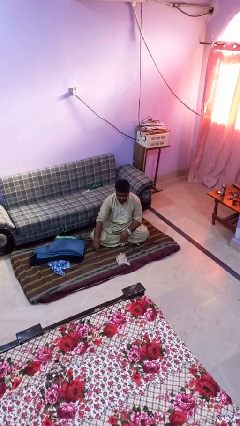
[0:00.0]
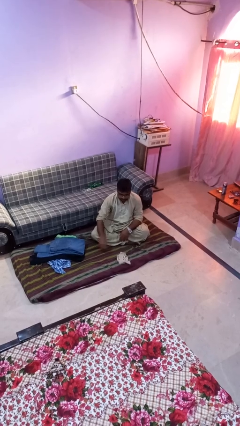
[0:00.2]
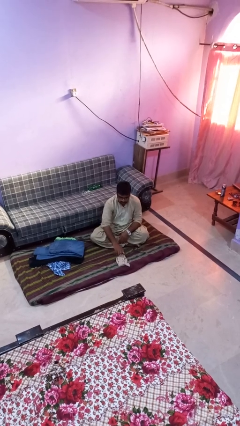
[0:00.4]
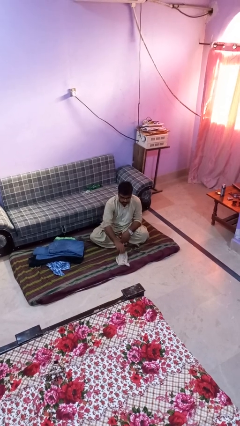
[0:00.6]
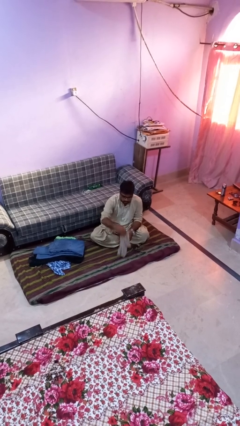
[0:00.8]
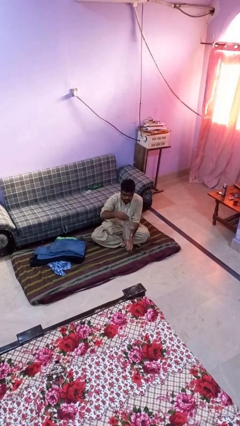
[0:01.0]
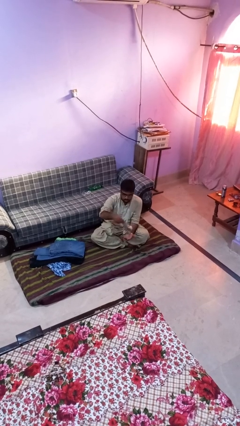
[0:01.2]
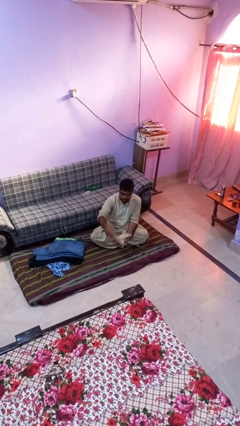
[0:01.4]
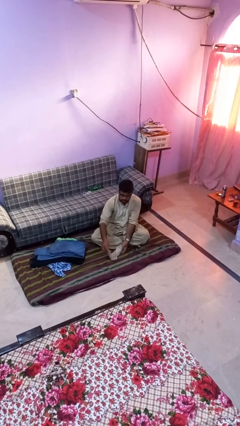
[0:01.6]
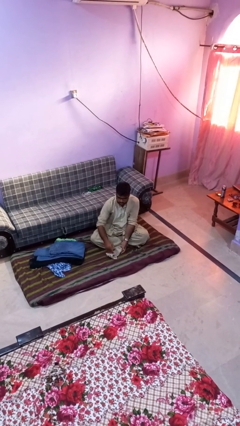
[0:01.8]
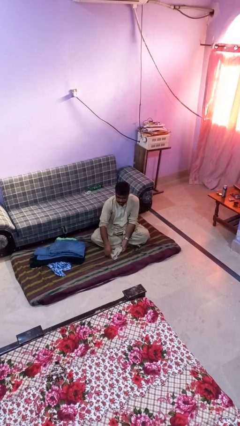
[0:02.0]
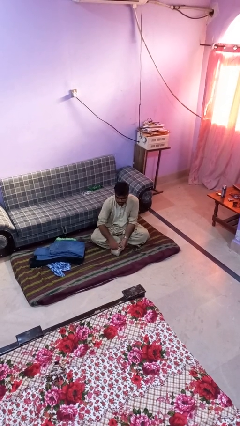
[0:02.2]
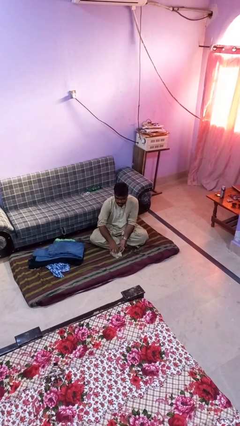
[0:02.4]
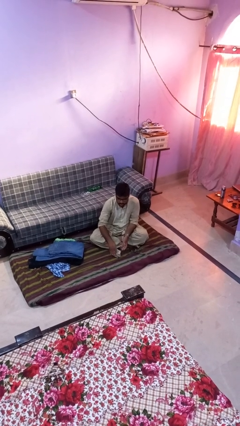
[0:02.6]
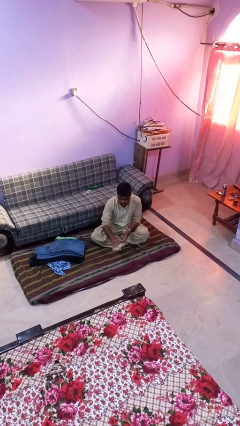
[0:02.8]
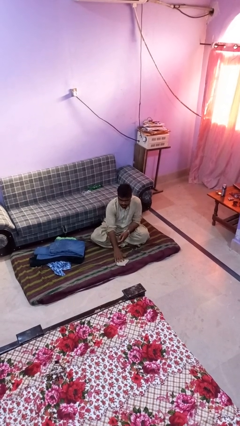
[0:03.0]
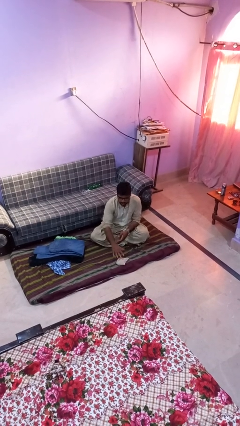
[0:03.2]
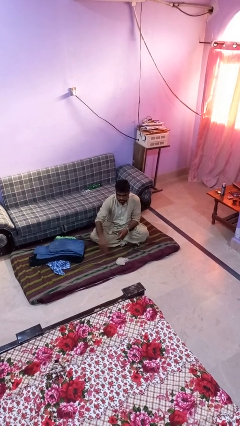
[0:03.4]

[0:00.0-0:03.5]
person folds socks

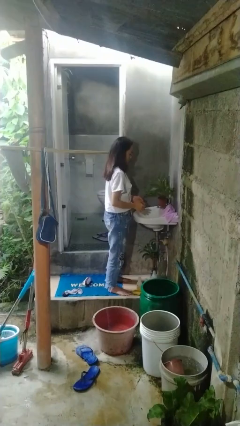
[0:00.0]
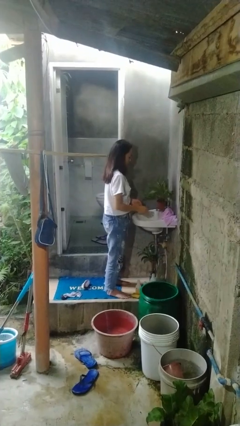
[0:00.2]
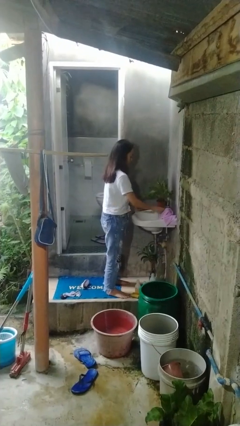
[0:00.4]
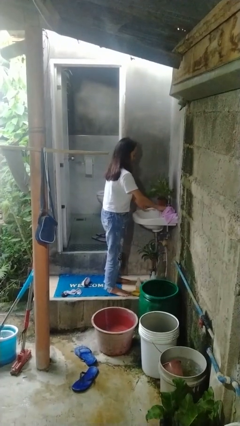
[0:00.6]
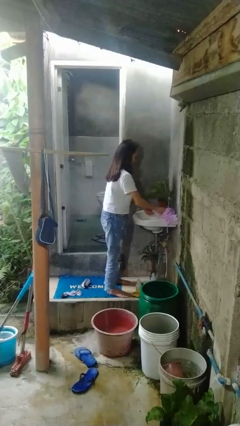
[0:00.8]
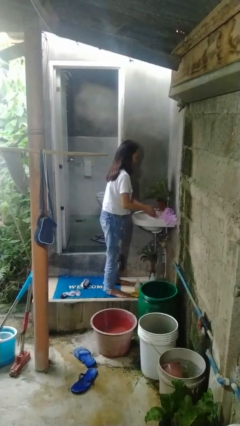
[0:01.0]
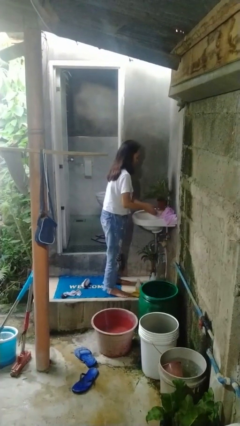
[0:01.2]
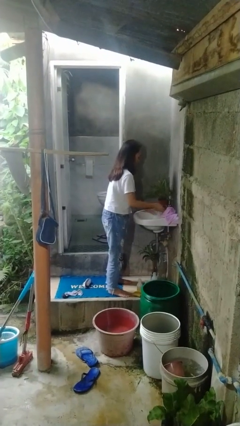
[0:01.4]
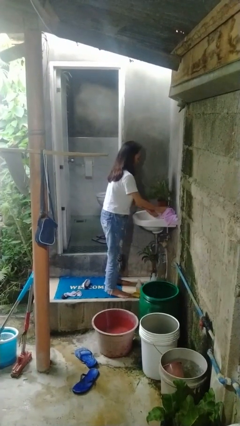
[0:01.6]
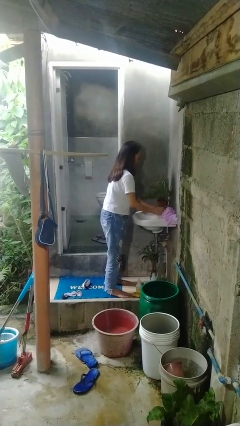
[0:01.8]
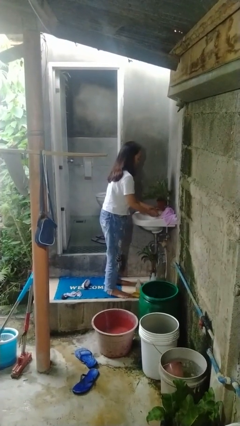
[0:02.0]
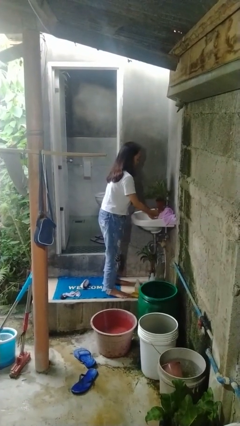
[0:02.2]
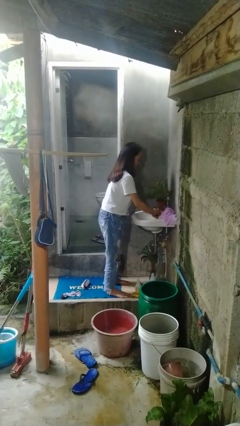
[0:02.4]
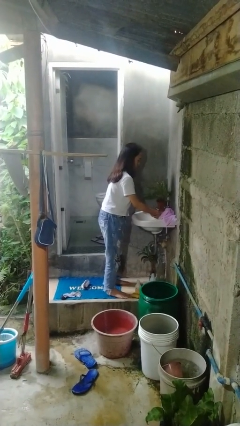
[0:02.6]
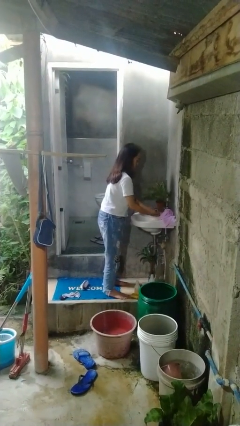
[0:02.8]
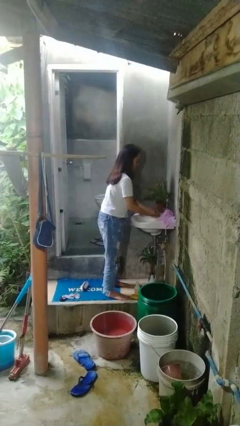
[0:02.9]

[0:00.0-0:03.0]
person washes hands

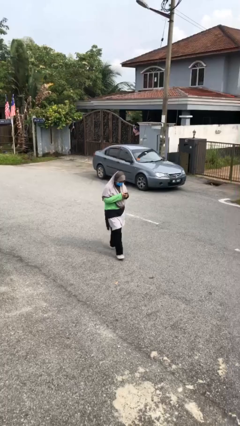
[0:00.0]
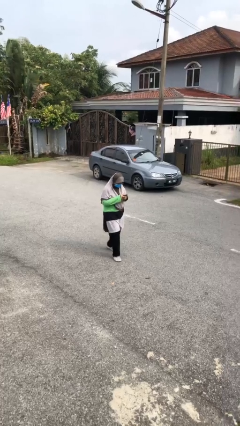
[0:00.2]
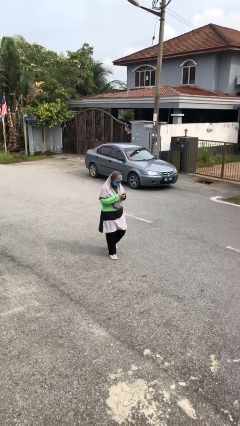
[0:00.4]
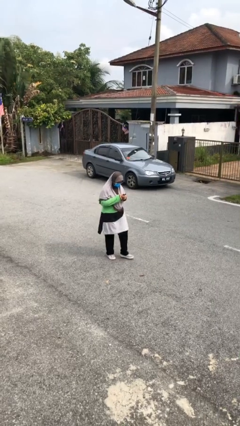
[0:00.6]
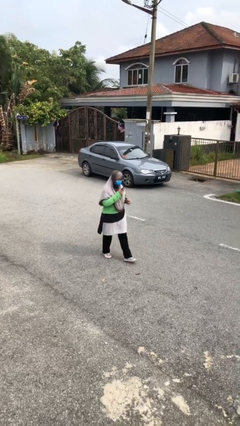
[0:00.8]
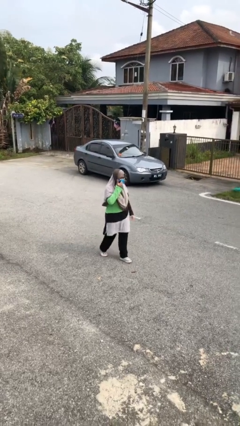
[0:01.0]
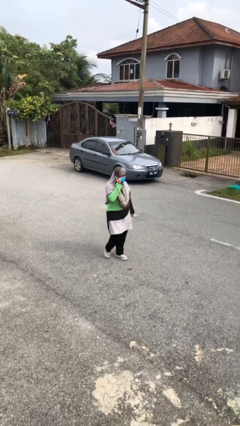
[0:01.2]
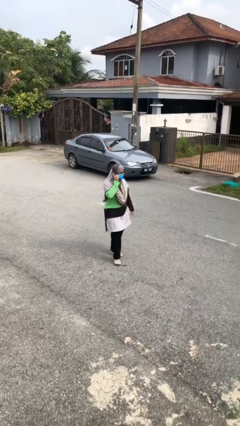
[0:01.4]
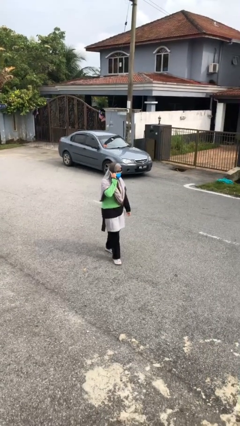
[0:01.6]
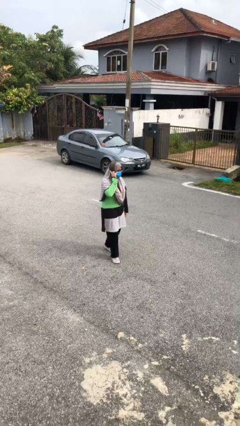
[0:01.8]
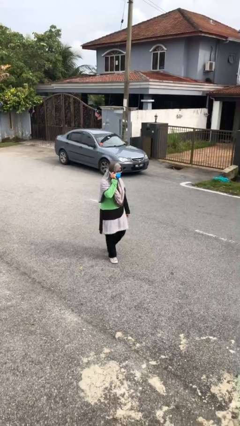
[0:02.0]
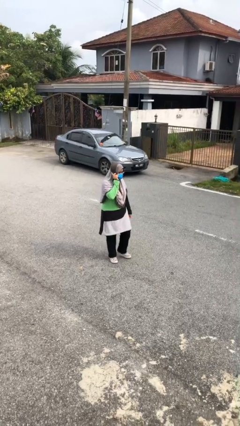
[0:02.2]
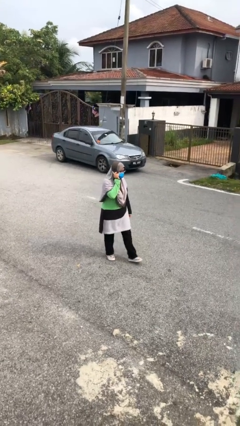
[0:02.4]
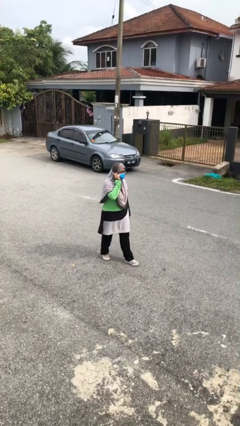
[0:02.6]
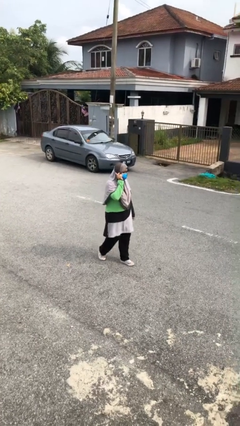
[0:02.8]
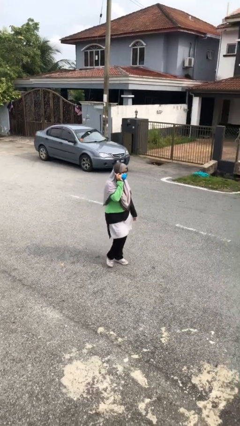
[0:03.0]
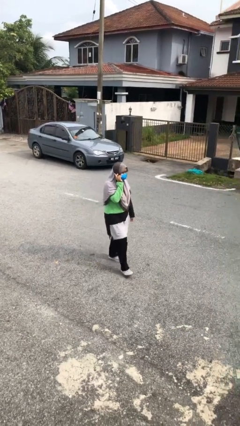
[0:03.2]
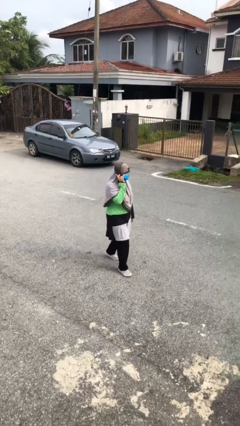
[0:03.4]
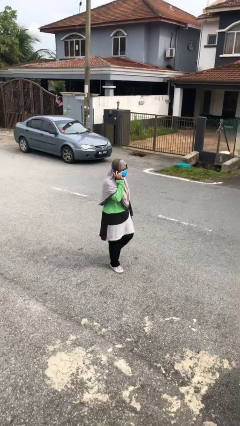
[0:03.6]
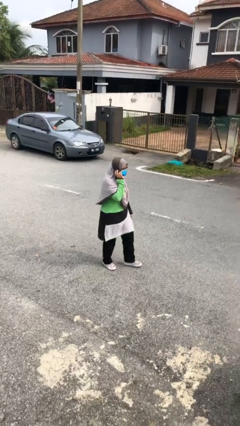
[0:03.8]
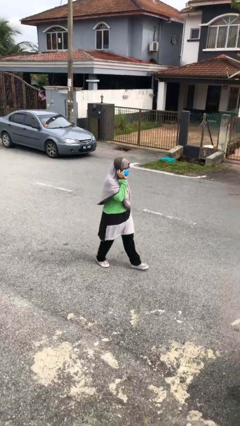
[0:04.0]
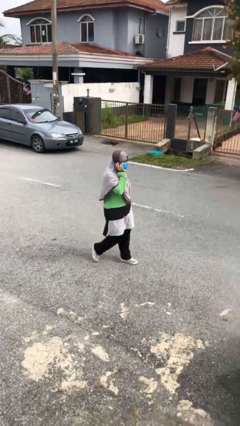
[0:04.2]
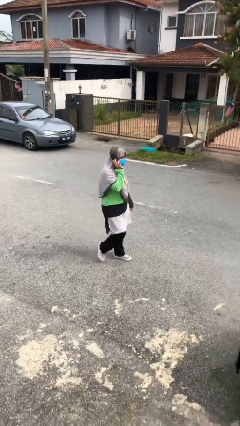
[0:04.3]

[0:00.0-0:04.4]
person talks on phone

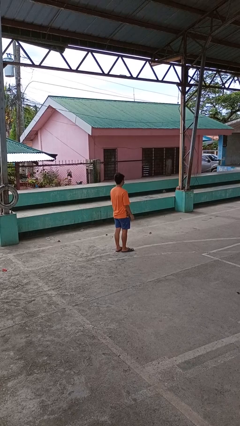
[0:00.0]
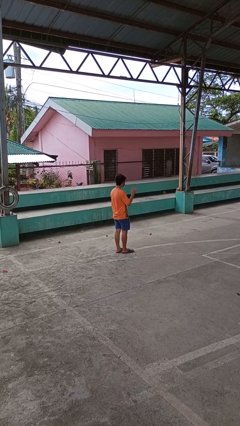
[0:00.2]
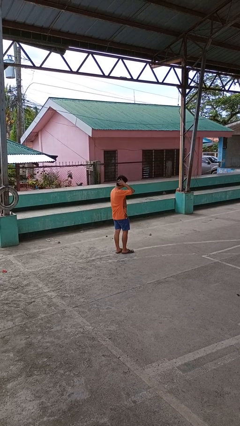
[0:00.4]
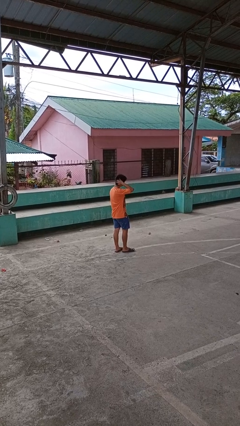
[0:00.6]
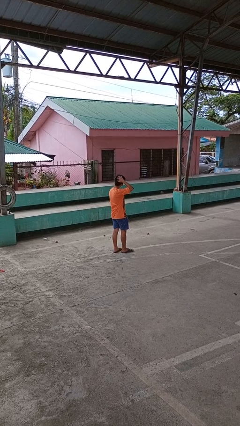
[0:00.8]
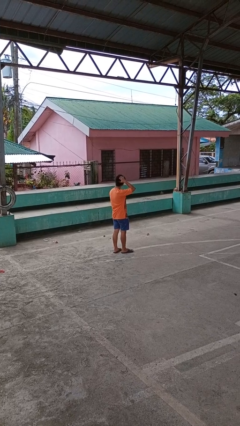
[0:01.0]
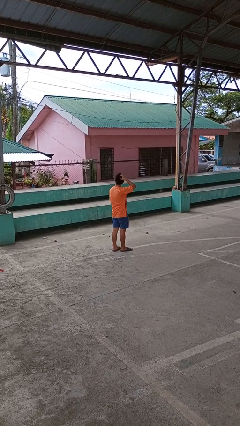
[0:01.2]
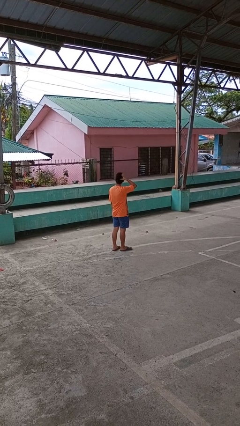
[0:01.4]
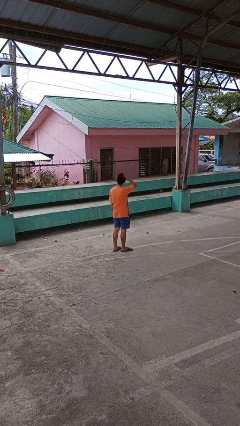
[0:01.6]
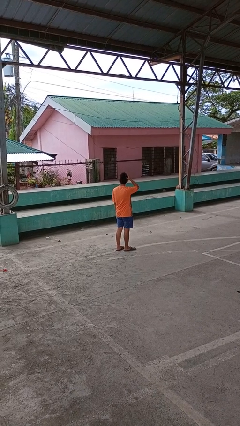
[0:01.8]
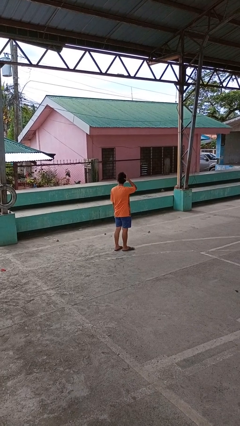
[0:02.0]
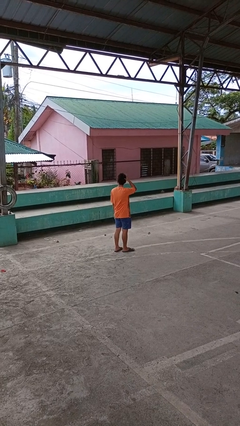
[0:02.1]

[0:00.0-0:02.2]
person scratches face

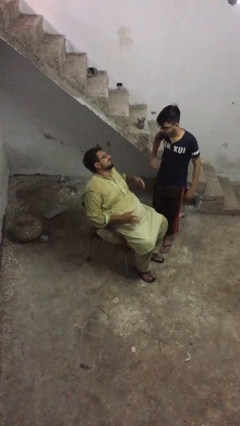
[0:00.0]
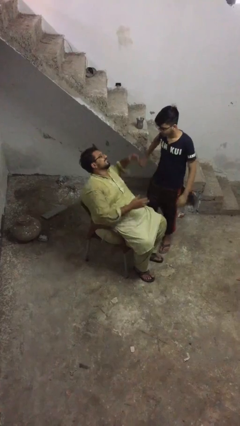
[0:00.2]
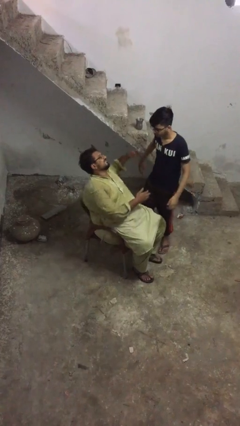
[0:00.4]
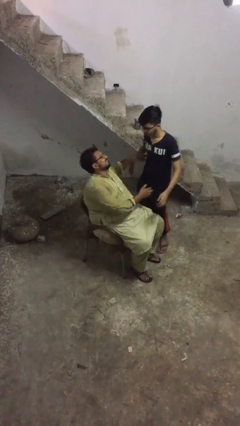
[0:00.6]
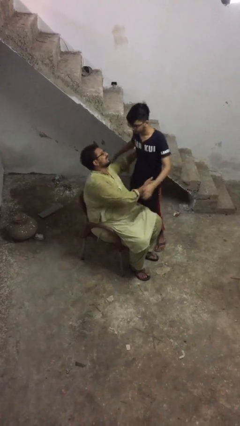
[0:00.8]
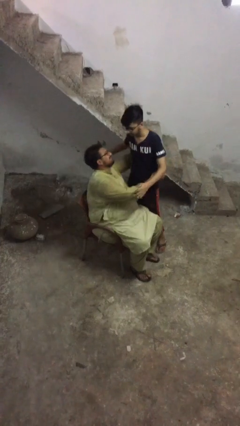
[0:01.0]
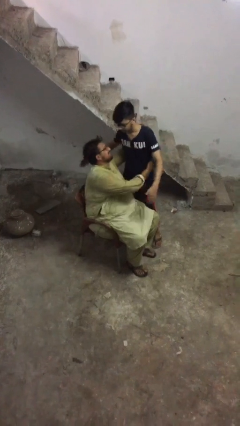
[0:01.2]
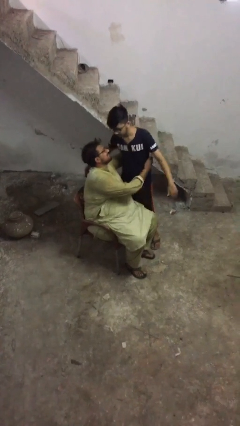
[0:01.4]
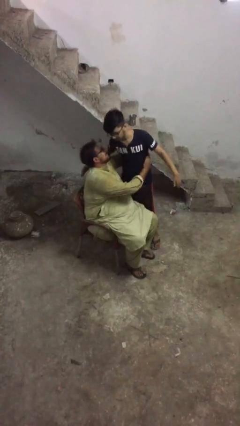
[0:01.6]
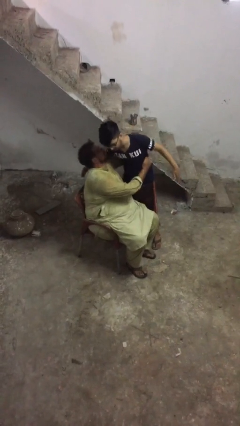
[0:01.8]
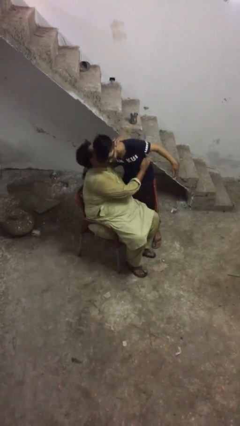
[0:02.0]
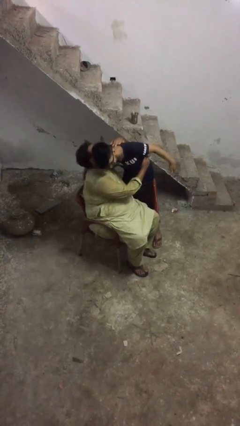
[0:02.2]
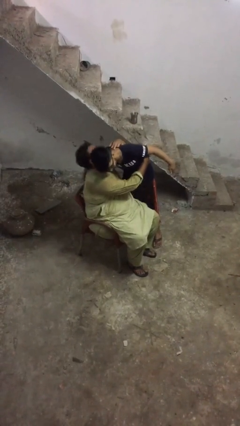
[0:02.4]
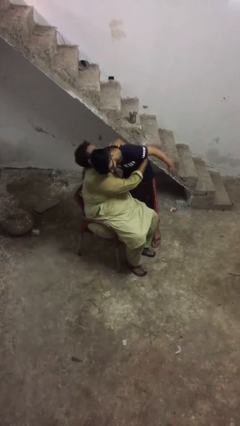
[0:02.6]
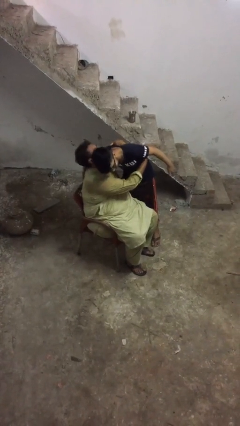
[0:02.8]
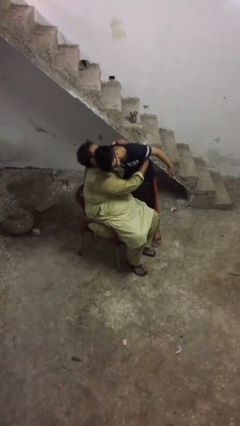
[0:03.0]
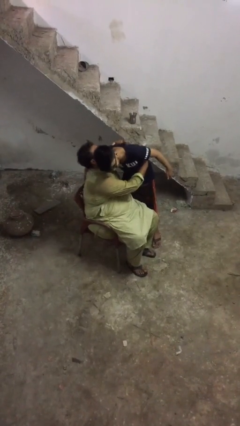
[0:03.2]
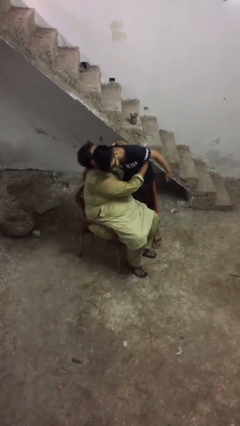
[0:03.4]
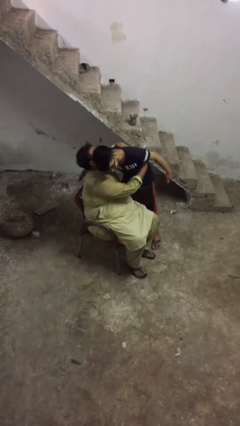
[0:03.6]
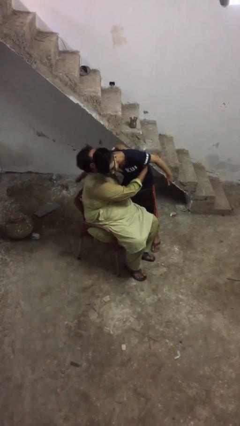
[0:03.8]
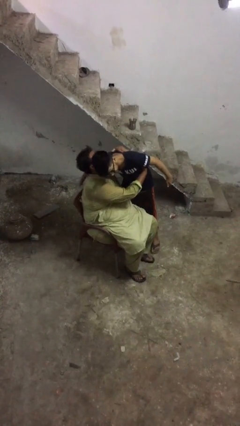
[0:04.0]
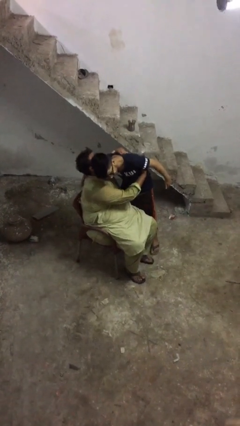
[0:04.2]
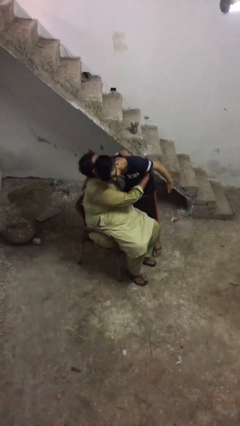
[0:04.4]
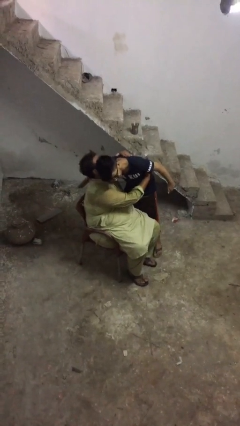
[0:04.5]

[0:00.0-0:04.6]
person embraces person

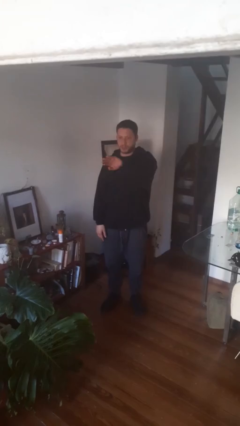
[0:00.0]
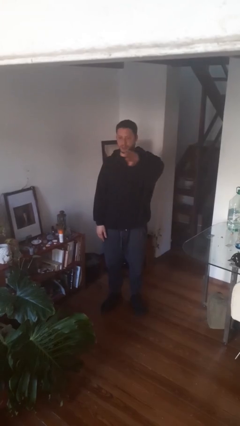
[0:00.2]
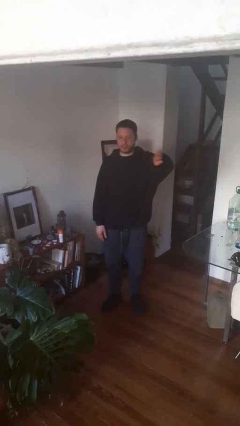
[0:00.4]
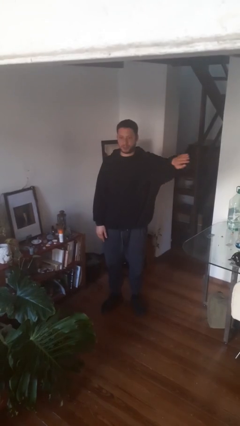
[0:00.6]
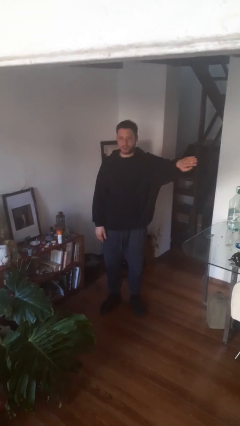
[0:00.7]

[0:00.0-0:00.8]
person gestures swipe left
